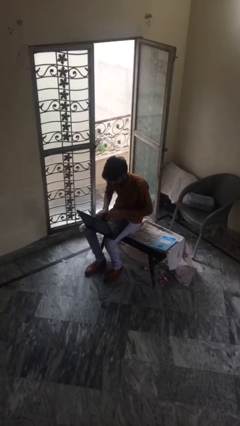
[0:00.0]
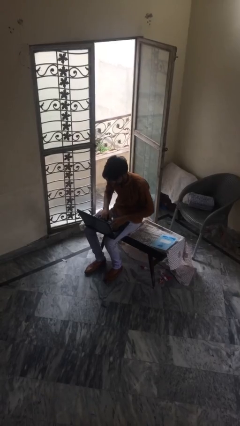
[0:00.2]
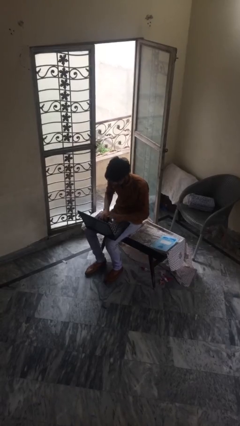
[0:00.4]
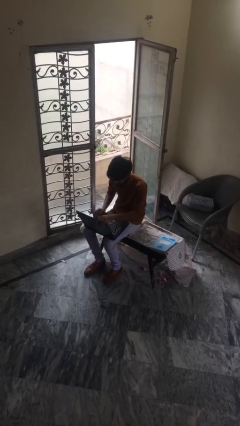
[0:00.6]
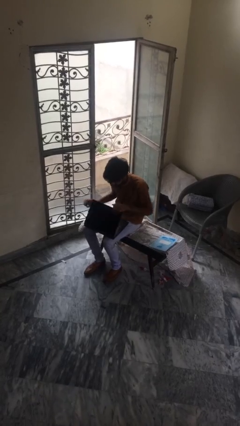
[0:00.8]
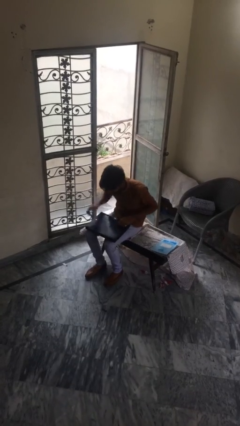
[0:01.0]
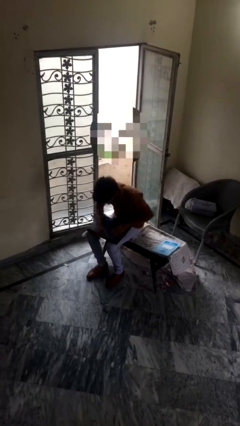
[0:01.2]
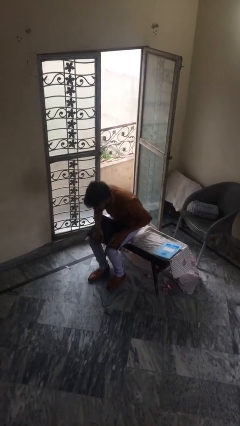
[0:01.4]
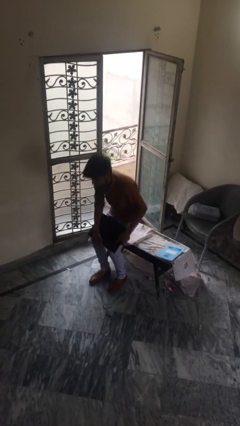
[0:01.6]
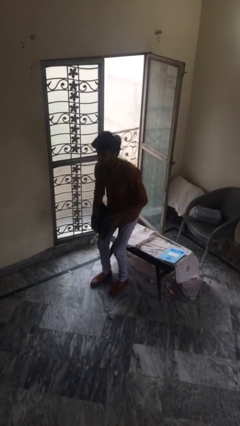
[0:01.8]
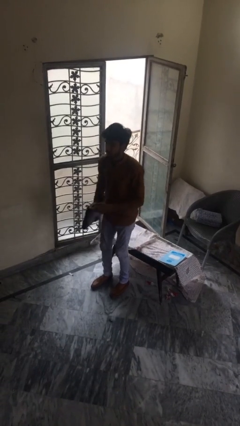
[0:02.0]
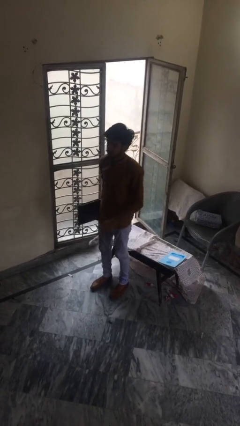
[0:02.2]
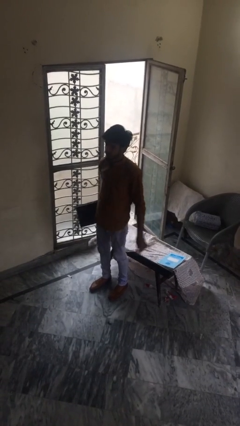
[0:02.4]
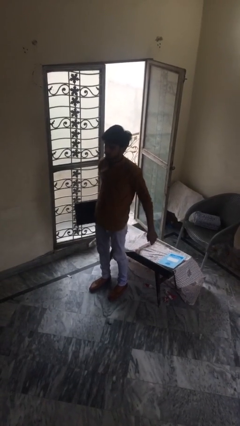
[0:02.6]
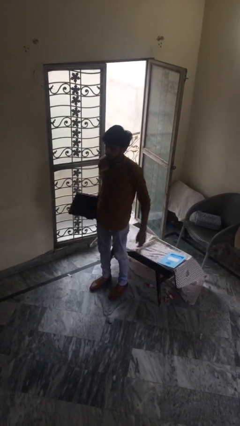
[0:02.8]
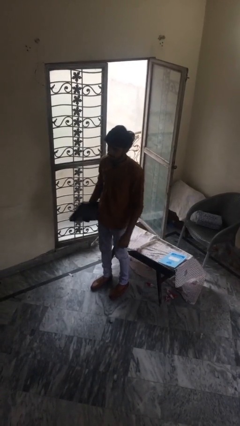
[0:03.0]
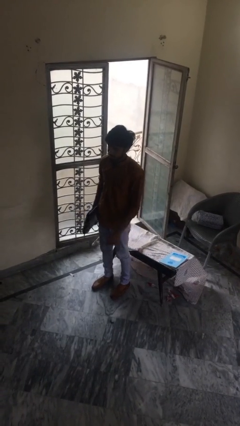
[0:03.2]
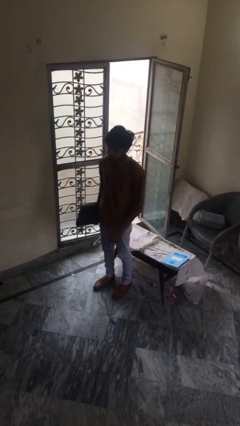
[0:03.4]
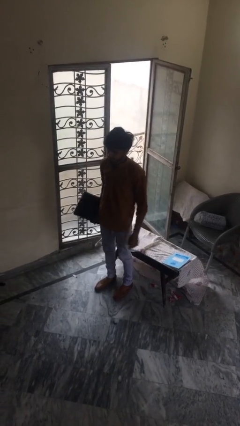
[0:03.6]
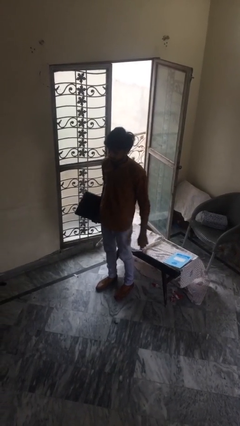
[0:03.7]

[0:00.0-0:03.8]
person stands up

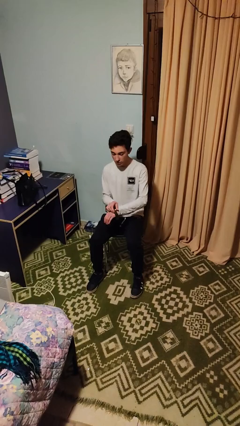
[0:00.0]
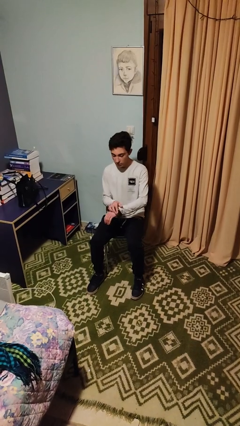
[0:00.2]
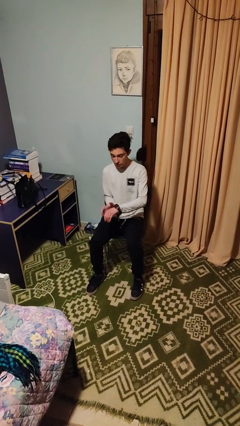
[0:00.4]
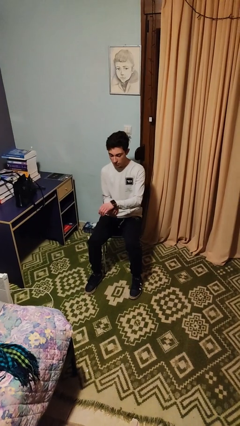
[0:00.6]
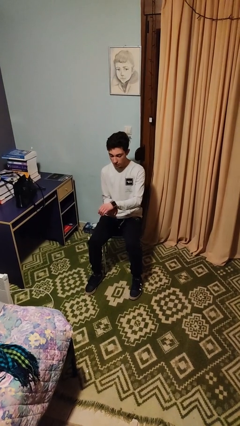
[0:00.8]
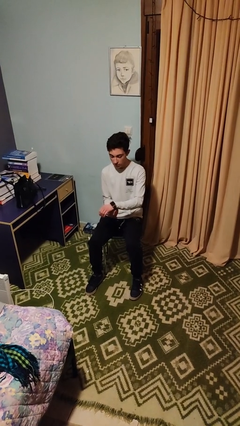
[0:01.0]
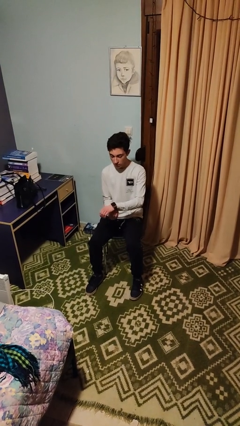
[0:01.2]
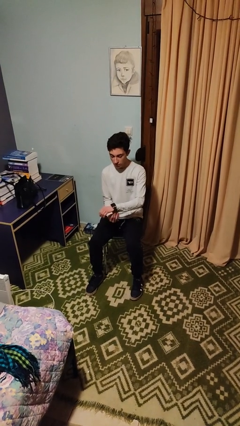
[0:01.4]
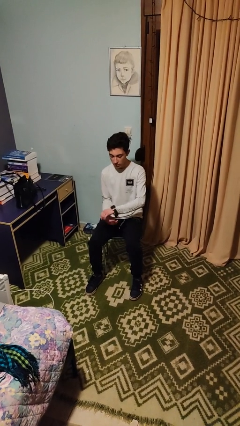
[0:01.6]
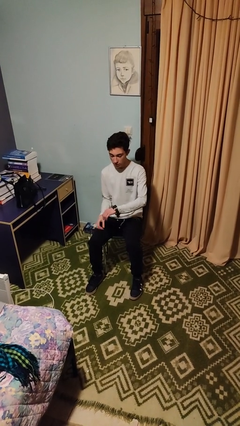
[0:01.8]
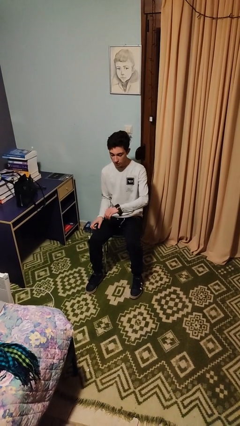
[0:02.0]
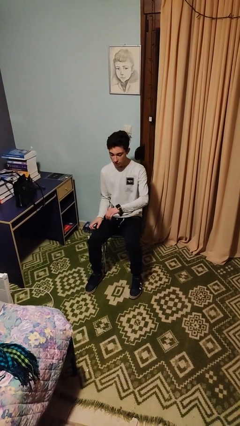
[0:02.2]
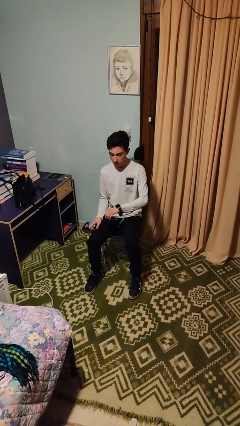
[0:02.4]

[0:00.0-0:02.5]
person puts on wristwatch

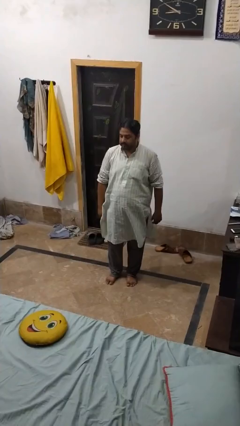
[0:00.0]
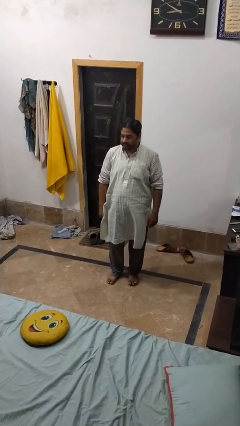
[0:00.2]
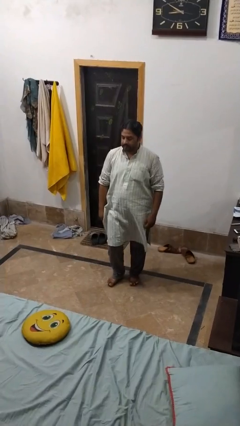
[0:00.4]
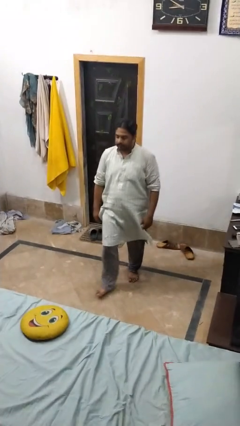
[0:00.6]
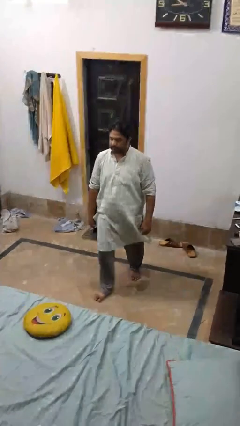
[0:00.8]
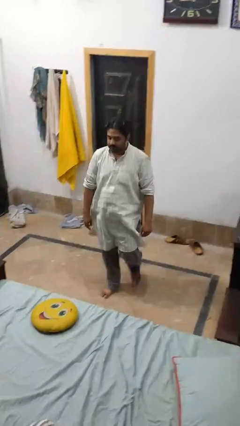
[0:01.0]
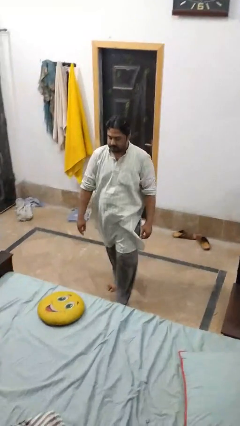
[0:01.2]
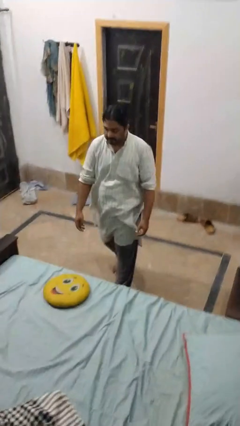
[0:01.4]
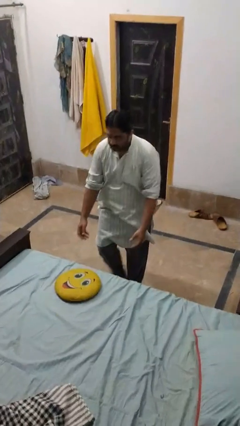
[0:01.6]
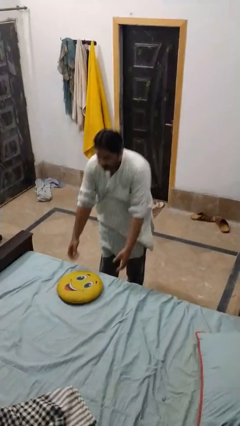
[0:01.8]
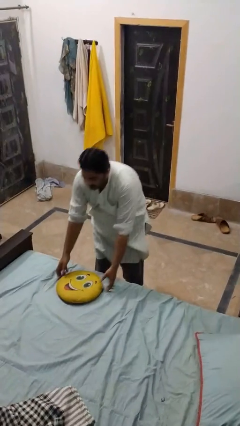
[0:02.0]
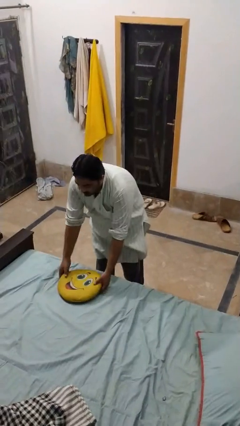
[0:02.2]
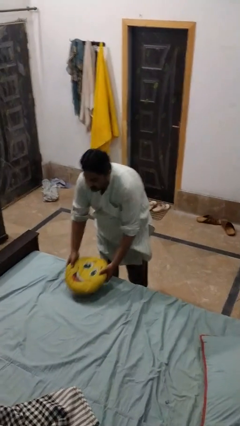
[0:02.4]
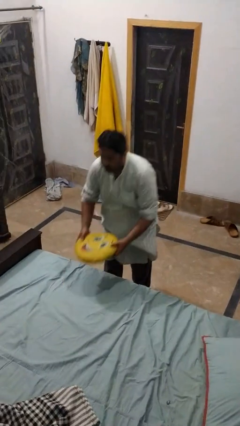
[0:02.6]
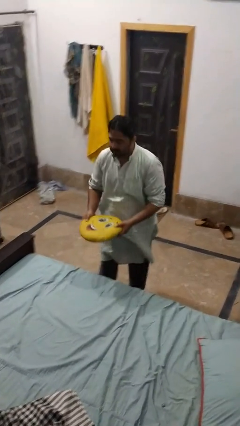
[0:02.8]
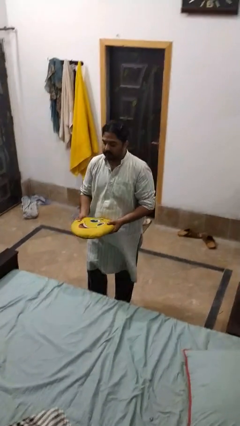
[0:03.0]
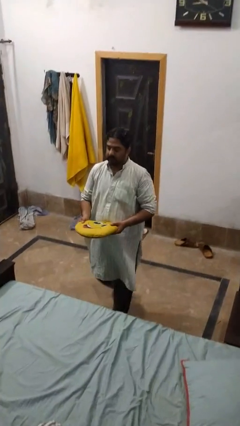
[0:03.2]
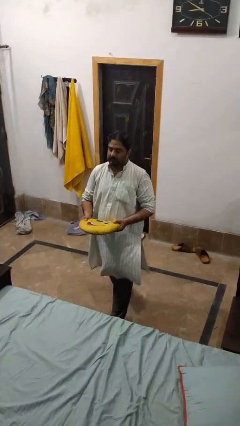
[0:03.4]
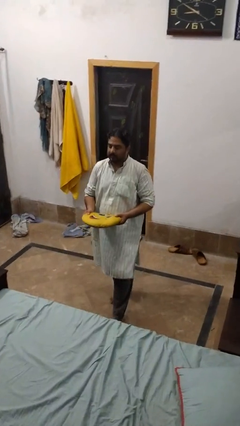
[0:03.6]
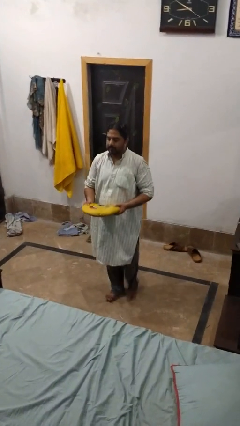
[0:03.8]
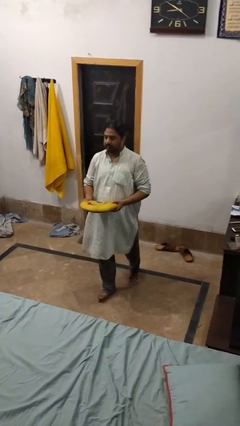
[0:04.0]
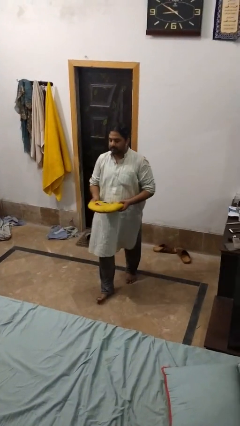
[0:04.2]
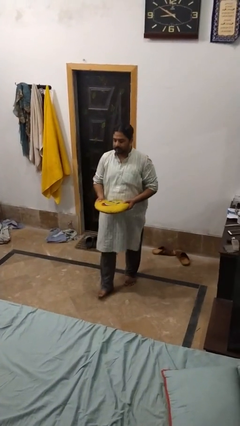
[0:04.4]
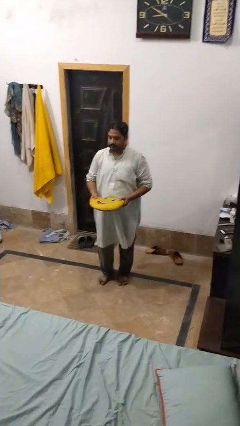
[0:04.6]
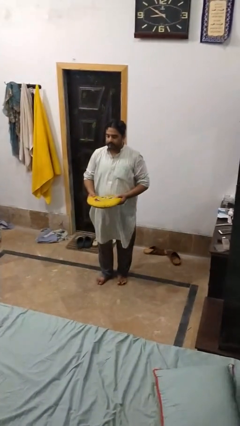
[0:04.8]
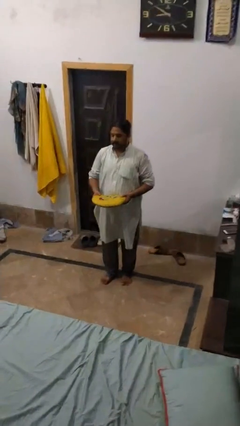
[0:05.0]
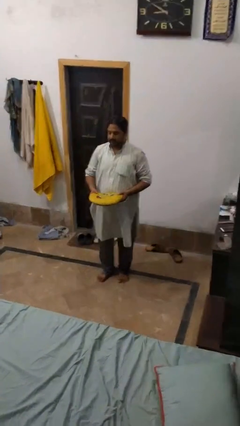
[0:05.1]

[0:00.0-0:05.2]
person picks up object from bed

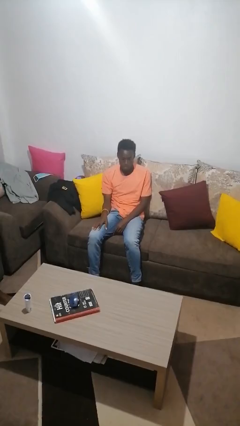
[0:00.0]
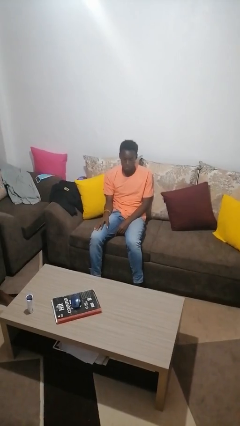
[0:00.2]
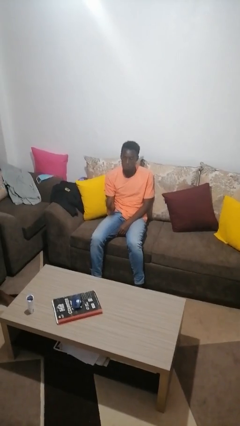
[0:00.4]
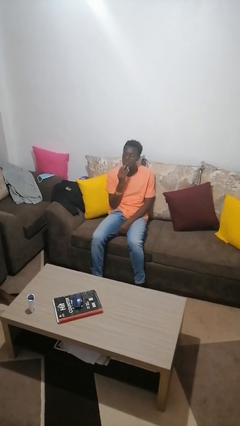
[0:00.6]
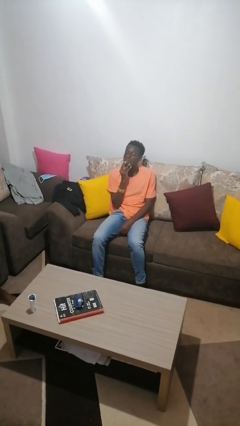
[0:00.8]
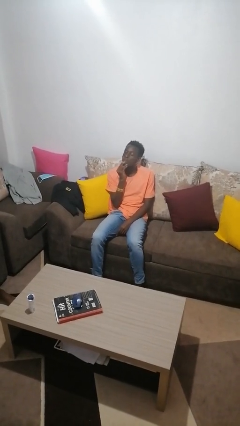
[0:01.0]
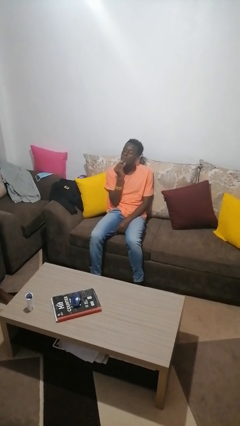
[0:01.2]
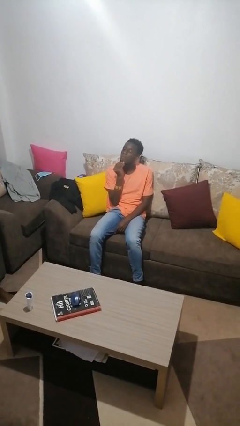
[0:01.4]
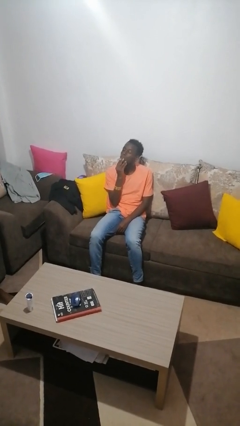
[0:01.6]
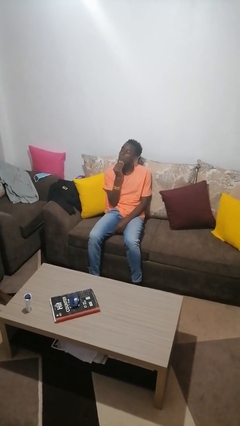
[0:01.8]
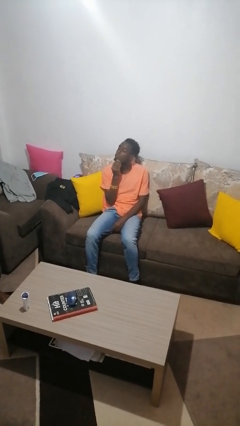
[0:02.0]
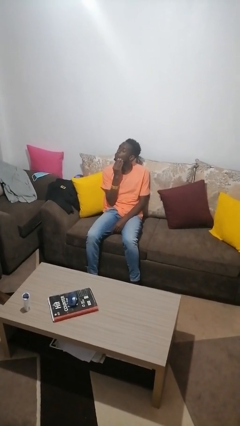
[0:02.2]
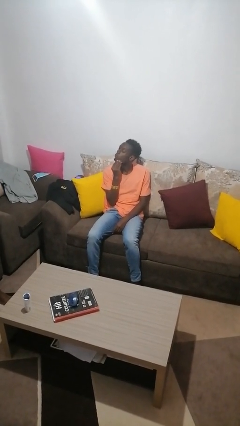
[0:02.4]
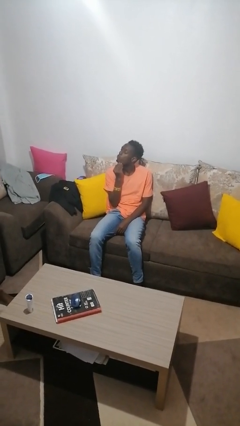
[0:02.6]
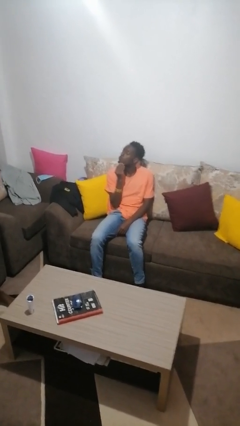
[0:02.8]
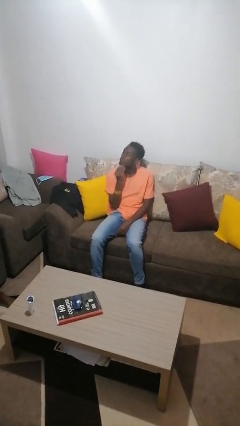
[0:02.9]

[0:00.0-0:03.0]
person strokes chin

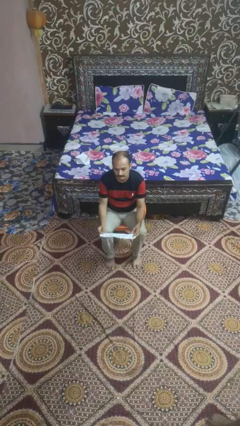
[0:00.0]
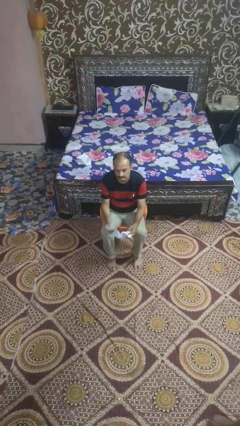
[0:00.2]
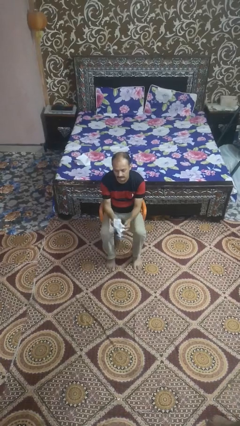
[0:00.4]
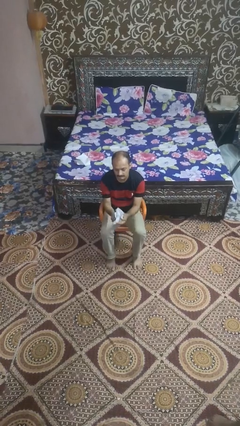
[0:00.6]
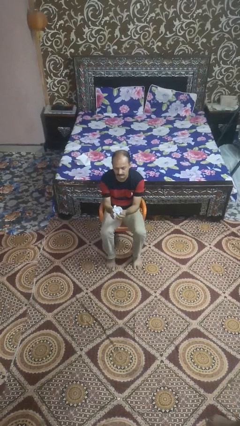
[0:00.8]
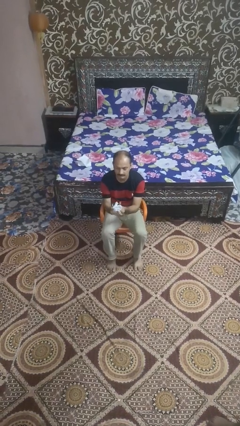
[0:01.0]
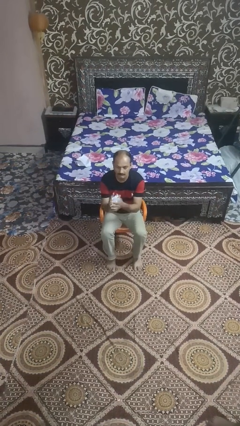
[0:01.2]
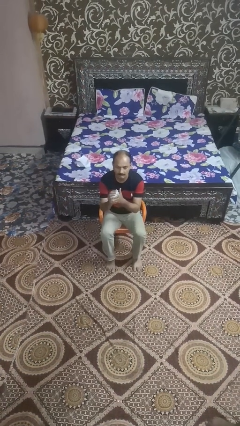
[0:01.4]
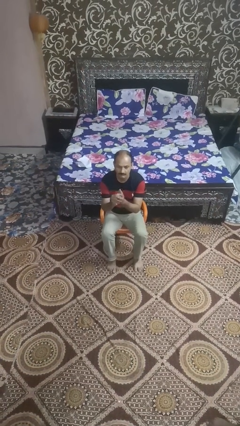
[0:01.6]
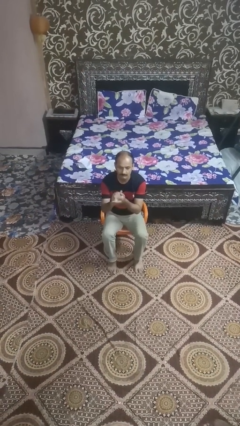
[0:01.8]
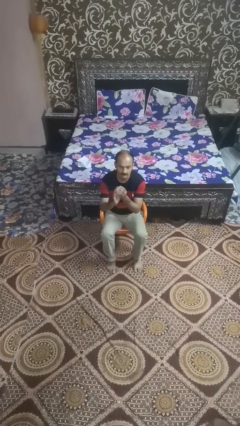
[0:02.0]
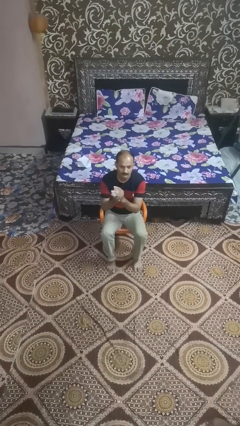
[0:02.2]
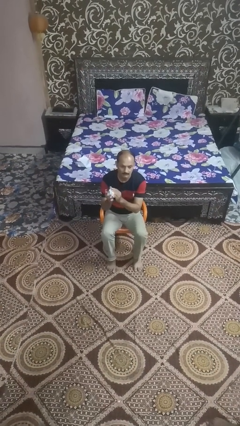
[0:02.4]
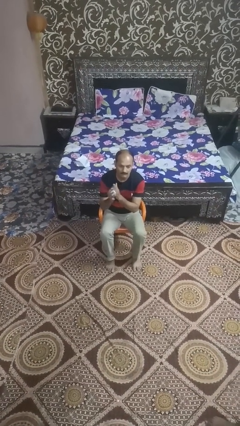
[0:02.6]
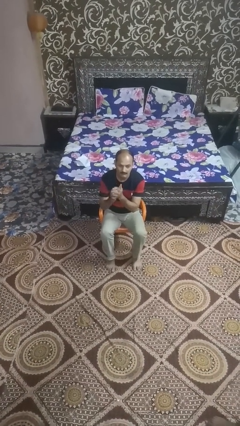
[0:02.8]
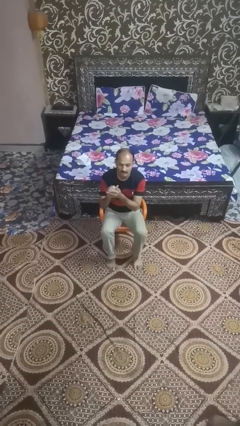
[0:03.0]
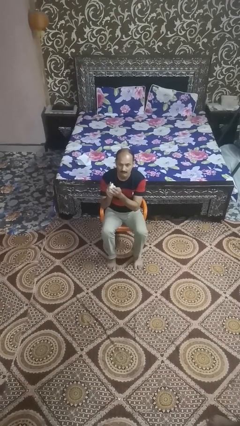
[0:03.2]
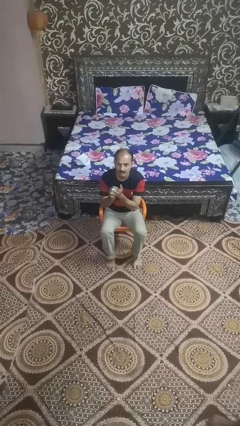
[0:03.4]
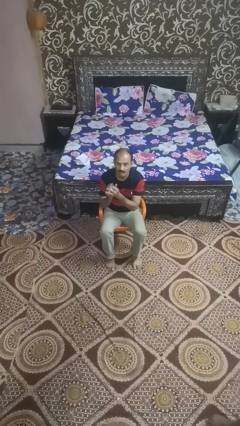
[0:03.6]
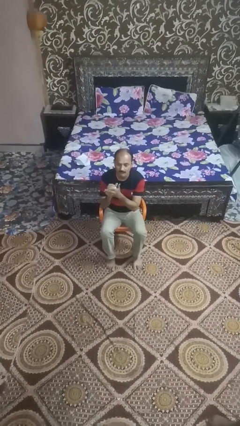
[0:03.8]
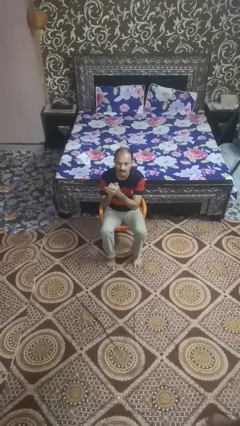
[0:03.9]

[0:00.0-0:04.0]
person crumples paper
